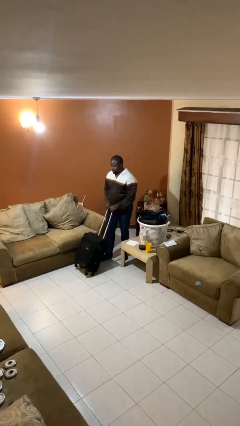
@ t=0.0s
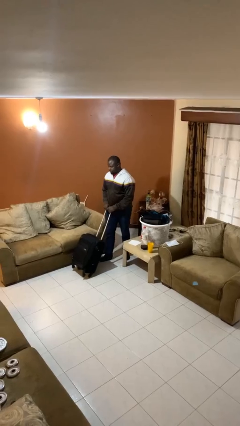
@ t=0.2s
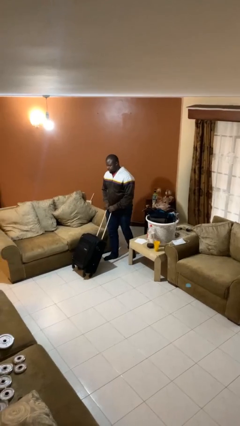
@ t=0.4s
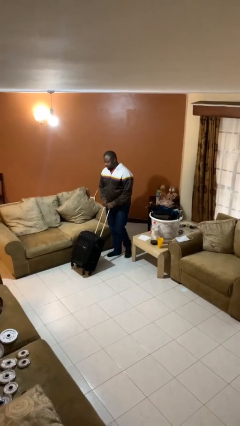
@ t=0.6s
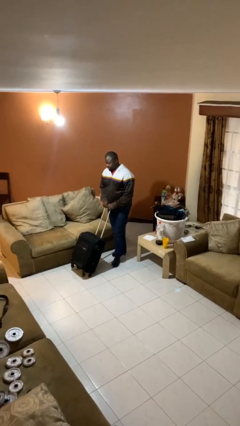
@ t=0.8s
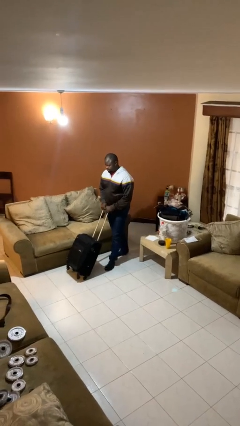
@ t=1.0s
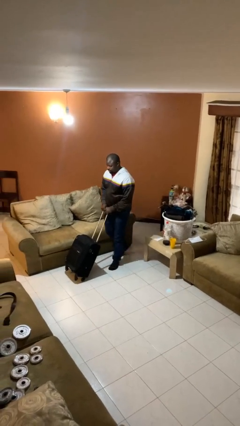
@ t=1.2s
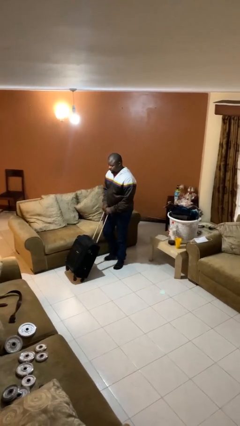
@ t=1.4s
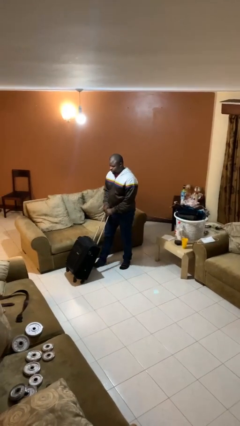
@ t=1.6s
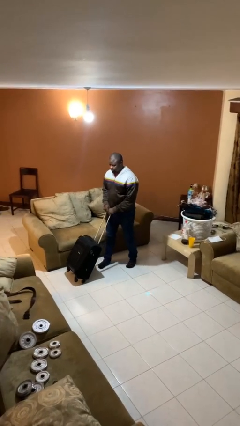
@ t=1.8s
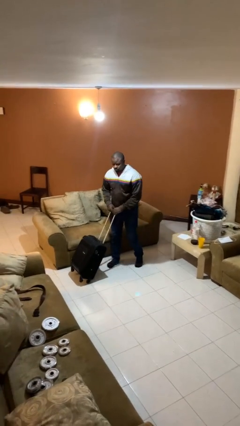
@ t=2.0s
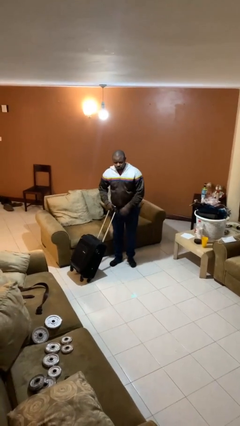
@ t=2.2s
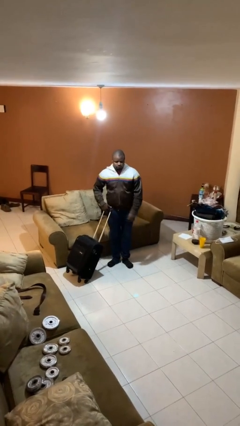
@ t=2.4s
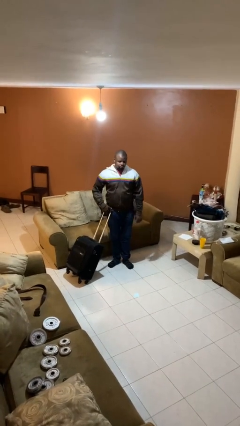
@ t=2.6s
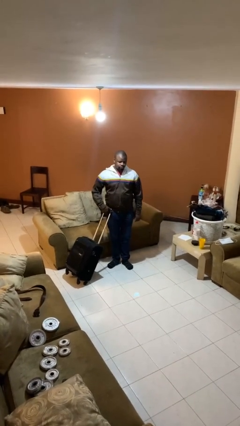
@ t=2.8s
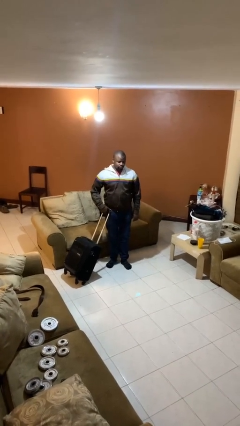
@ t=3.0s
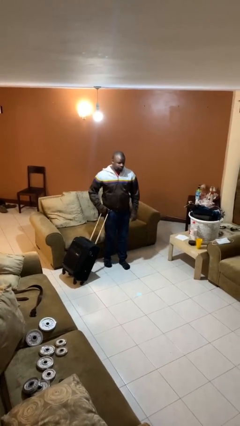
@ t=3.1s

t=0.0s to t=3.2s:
person pushes wheeled cart

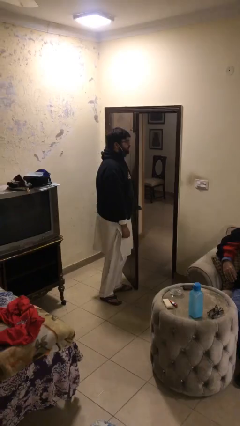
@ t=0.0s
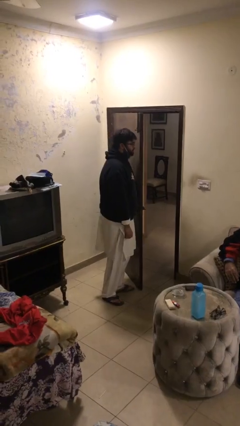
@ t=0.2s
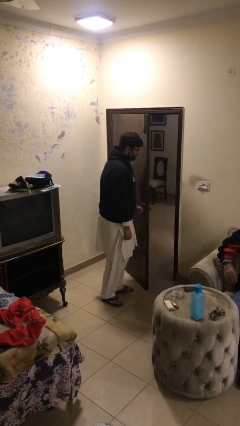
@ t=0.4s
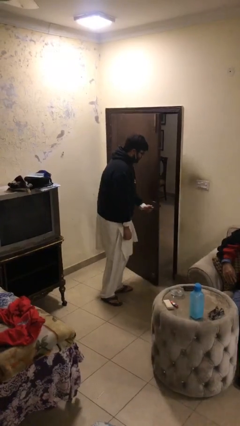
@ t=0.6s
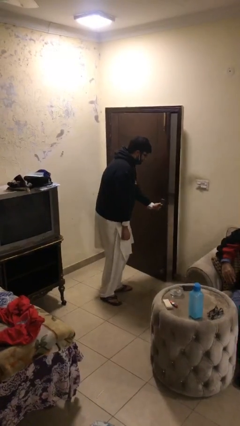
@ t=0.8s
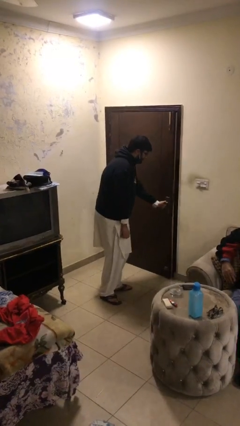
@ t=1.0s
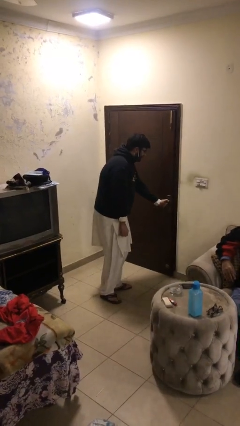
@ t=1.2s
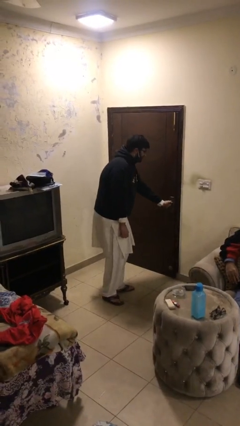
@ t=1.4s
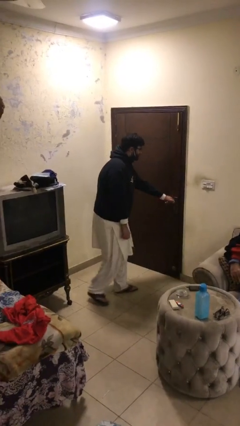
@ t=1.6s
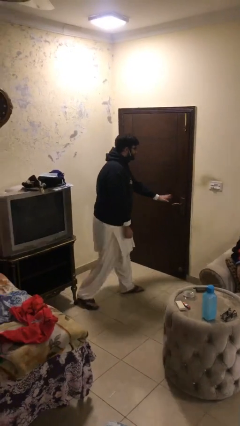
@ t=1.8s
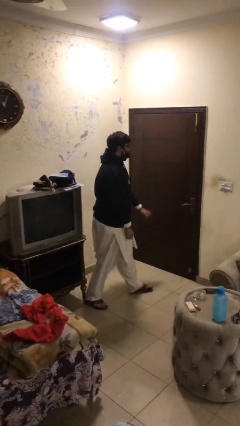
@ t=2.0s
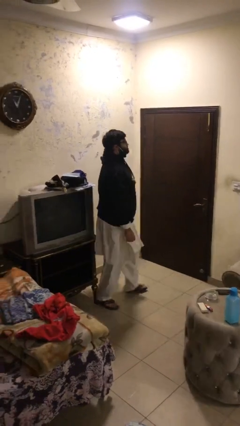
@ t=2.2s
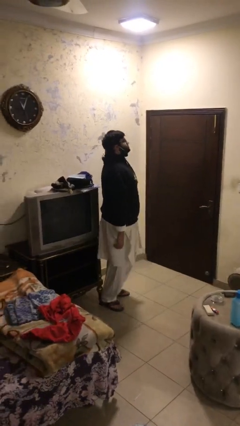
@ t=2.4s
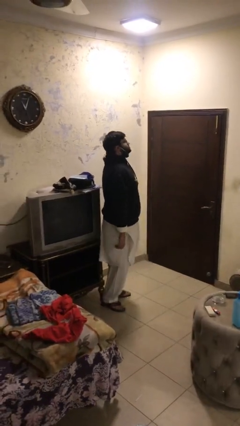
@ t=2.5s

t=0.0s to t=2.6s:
person closes facility door

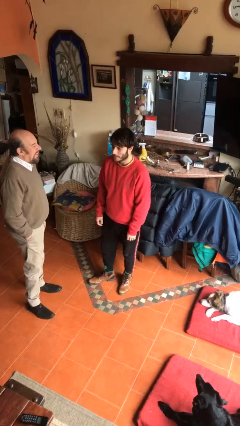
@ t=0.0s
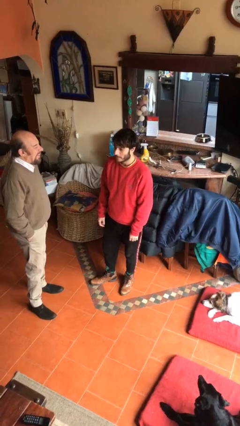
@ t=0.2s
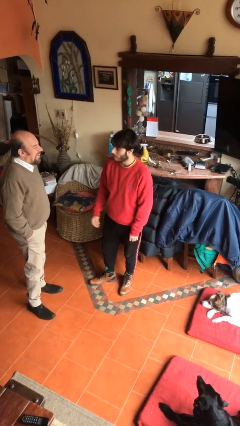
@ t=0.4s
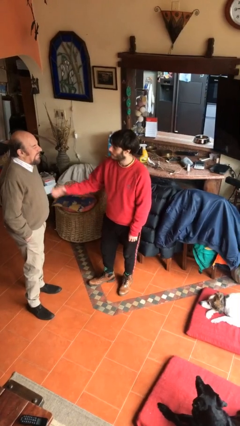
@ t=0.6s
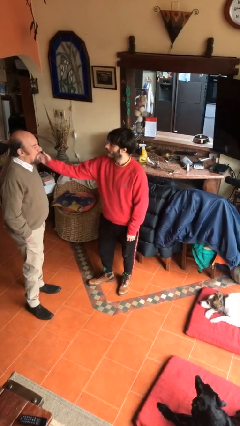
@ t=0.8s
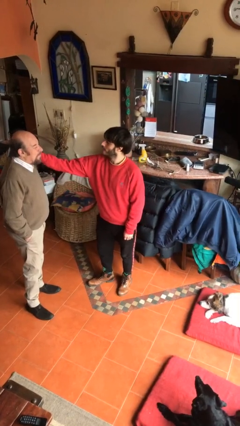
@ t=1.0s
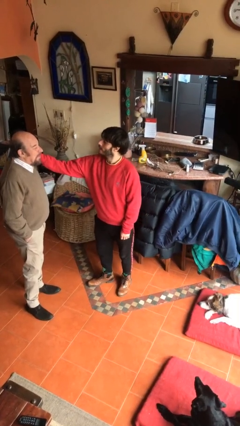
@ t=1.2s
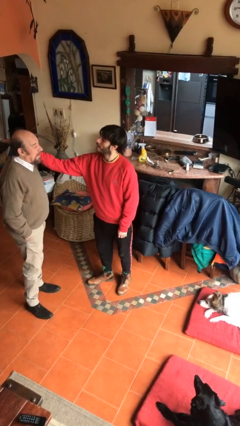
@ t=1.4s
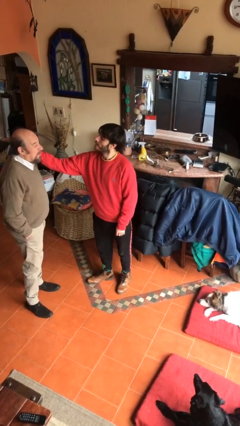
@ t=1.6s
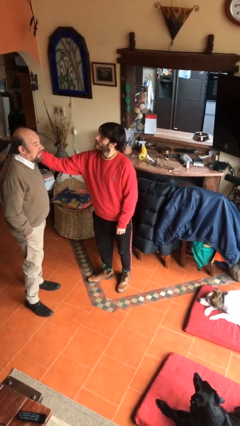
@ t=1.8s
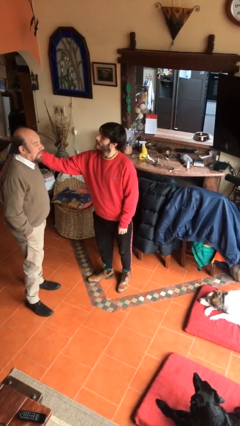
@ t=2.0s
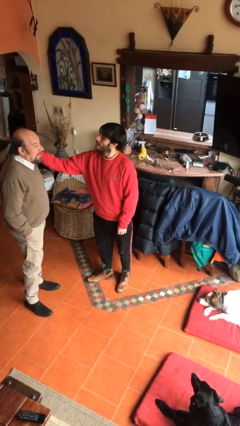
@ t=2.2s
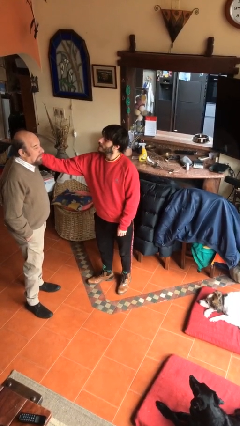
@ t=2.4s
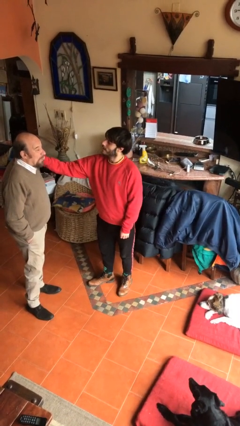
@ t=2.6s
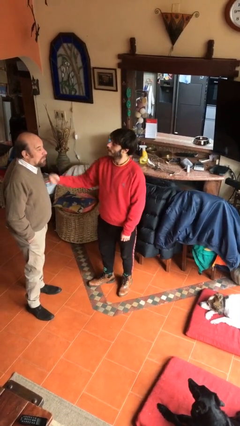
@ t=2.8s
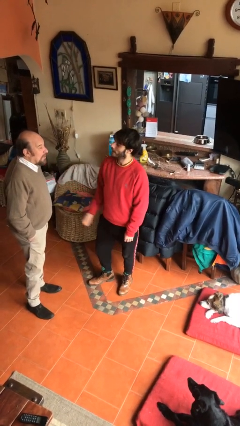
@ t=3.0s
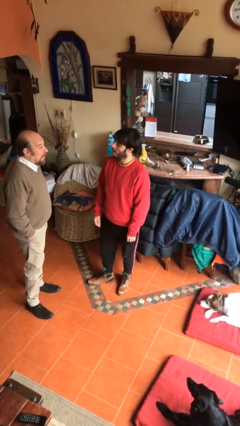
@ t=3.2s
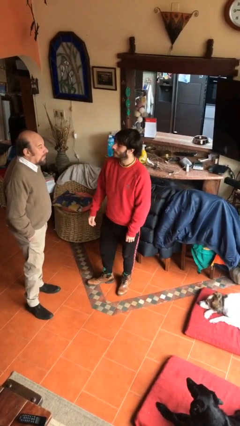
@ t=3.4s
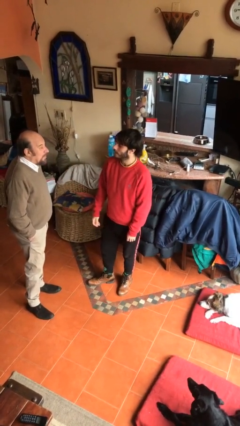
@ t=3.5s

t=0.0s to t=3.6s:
person touches face of person

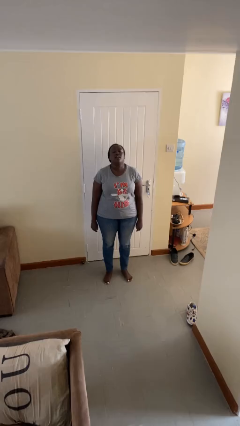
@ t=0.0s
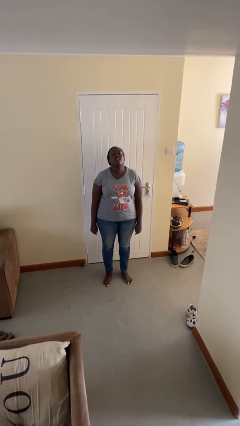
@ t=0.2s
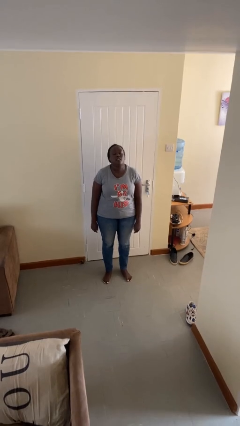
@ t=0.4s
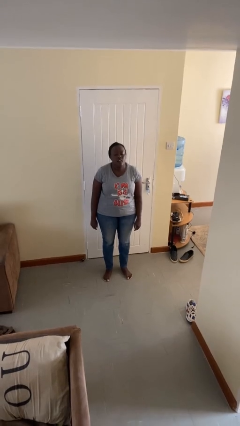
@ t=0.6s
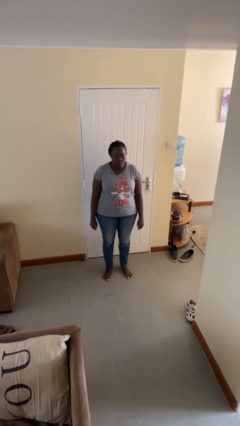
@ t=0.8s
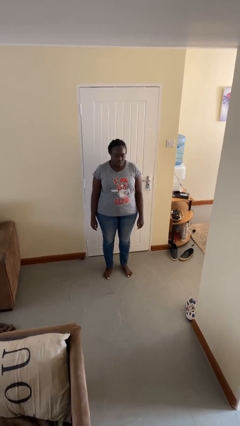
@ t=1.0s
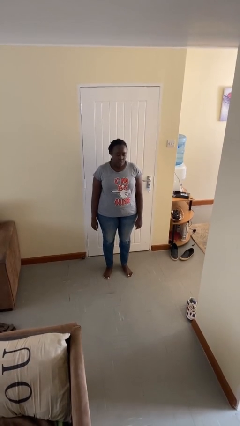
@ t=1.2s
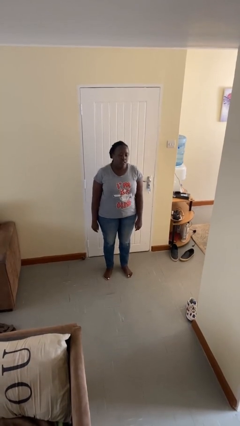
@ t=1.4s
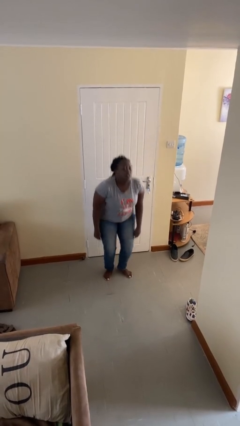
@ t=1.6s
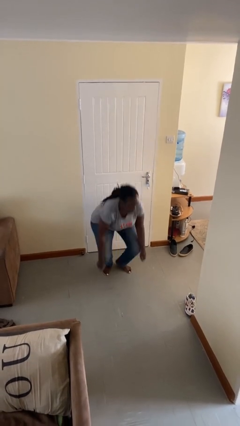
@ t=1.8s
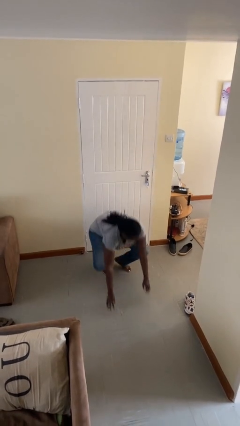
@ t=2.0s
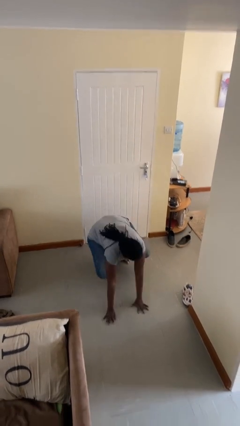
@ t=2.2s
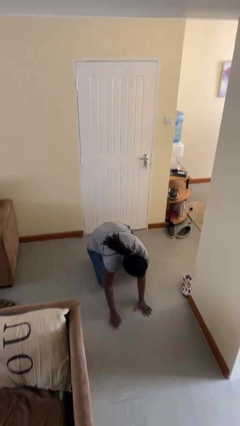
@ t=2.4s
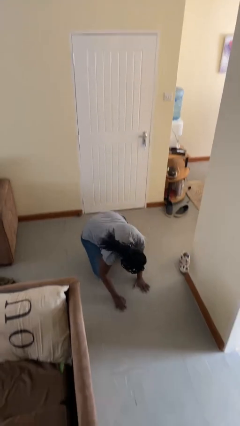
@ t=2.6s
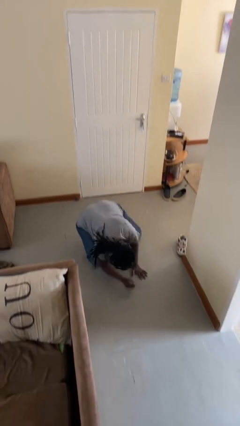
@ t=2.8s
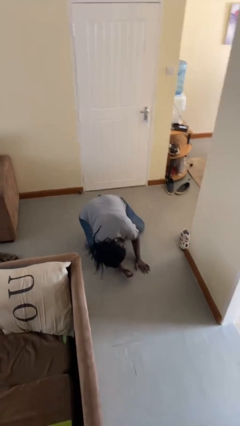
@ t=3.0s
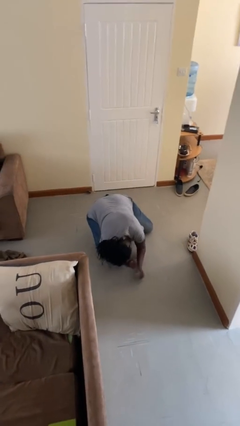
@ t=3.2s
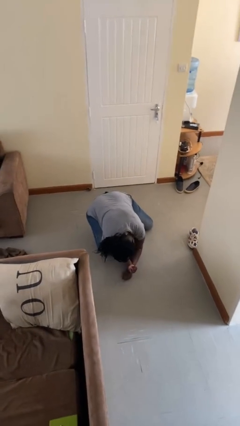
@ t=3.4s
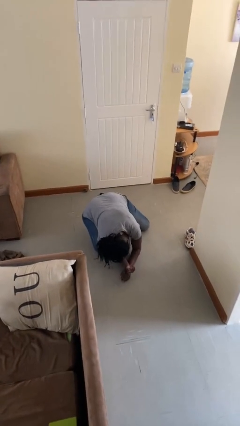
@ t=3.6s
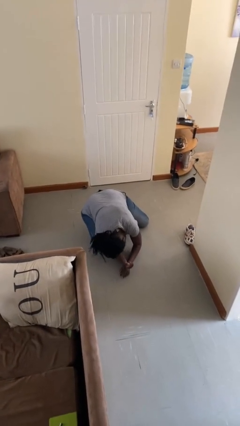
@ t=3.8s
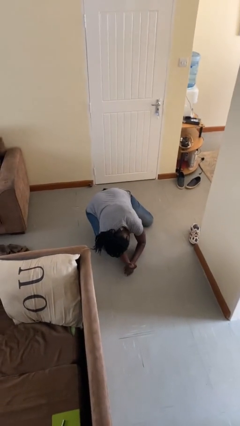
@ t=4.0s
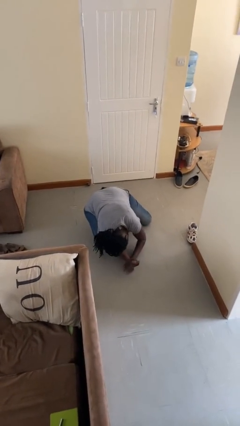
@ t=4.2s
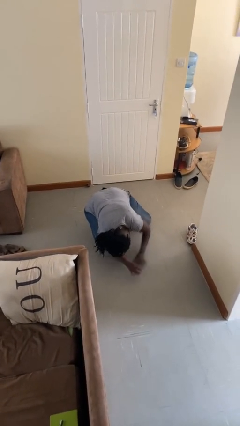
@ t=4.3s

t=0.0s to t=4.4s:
person falls while standing

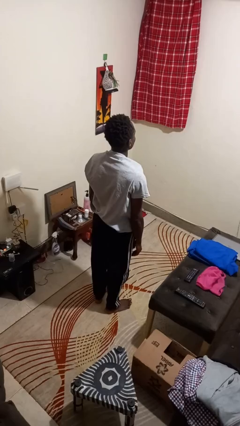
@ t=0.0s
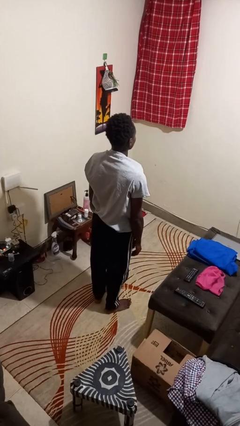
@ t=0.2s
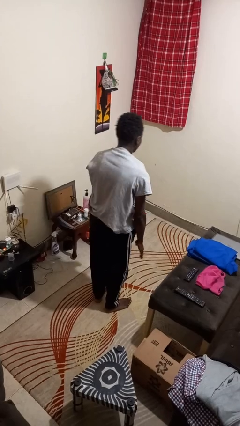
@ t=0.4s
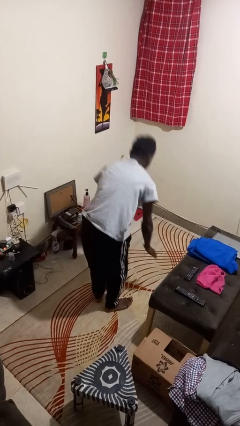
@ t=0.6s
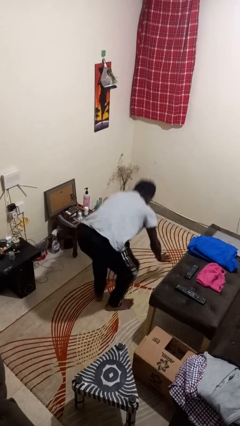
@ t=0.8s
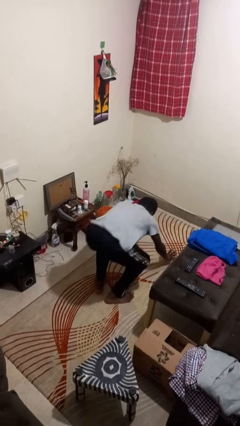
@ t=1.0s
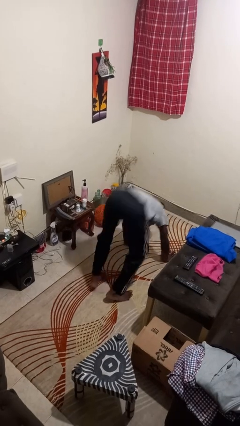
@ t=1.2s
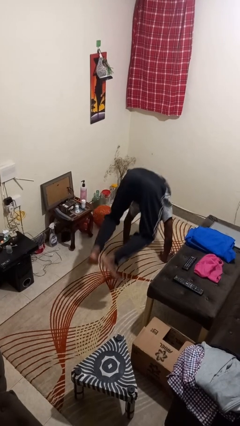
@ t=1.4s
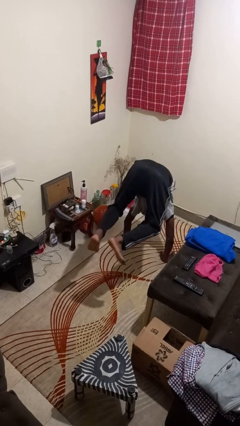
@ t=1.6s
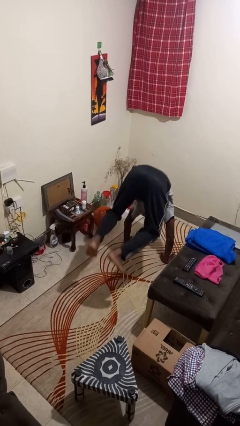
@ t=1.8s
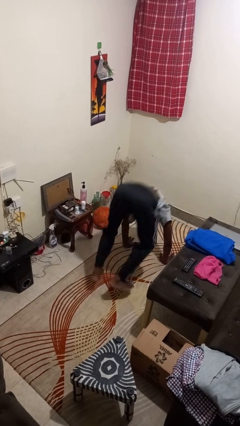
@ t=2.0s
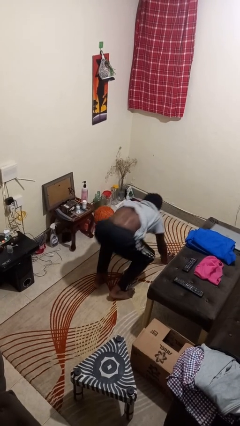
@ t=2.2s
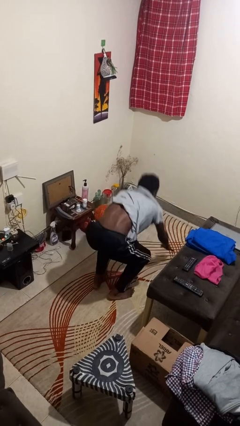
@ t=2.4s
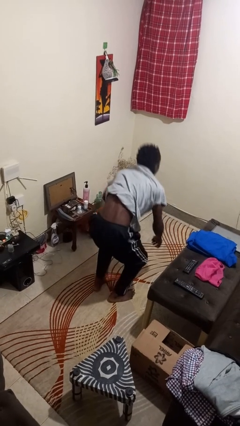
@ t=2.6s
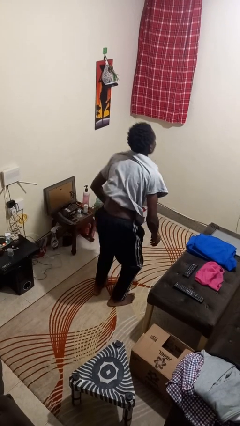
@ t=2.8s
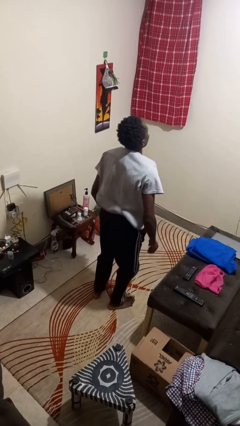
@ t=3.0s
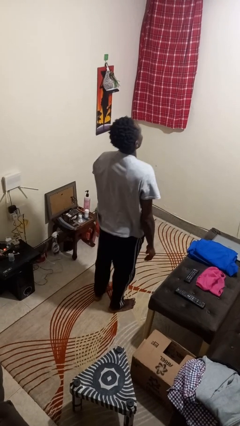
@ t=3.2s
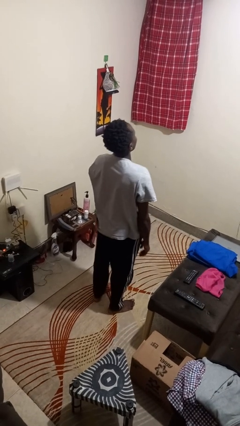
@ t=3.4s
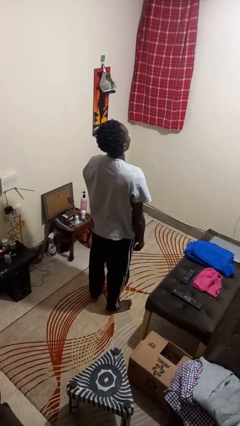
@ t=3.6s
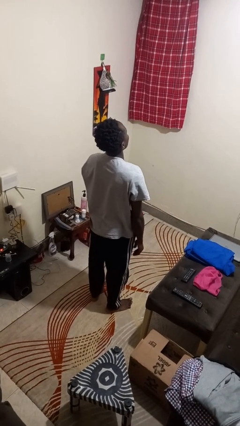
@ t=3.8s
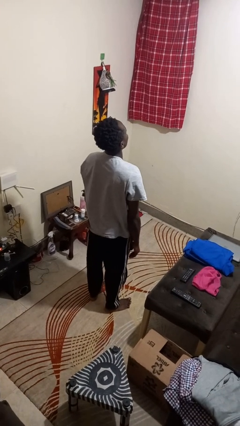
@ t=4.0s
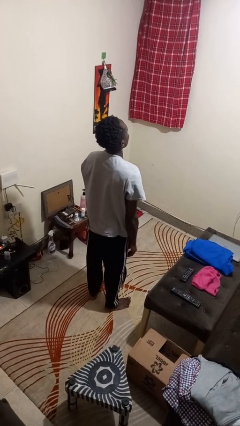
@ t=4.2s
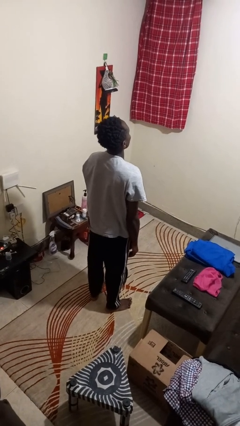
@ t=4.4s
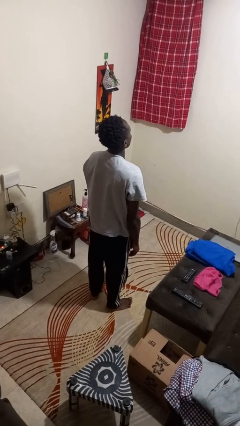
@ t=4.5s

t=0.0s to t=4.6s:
person handstand
